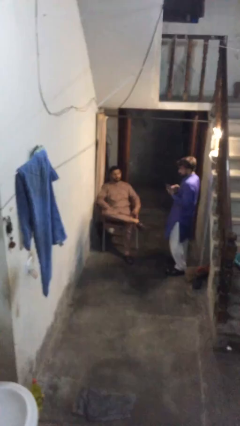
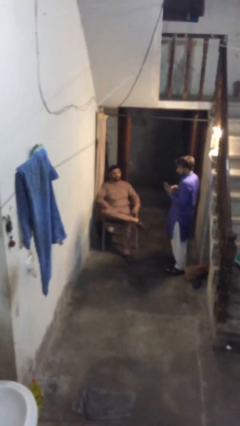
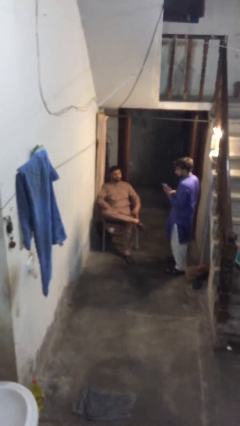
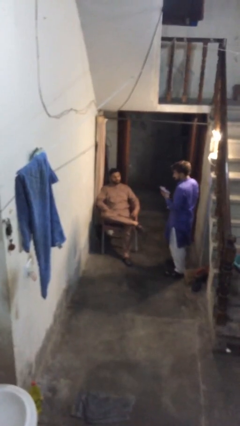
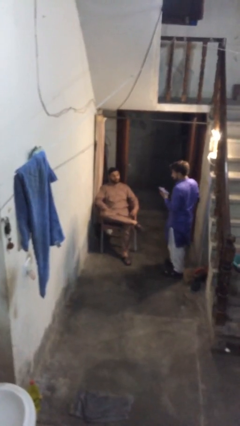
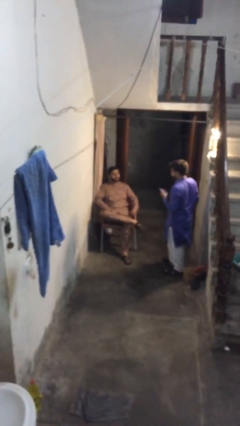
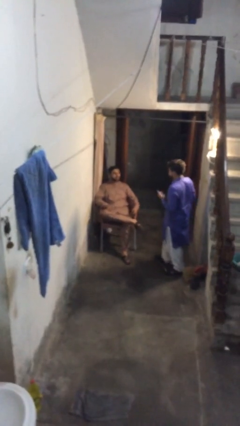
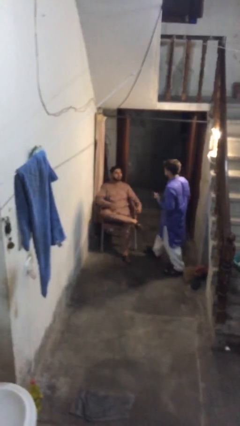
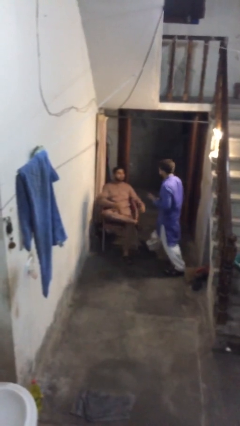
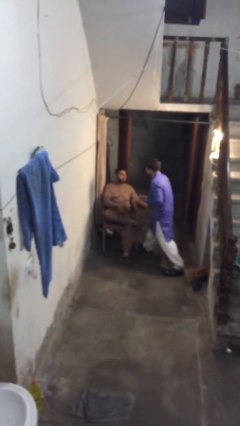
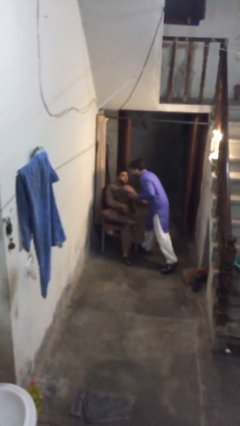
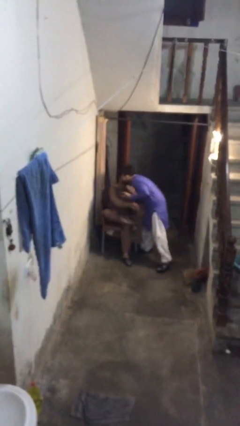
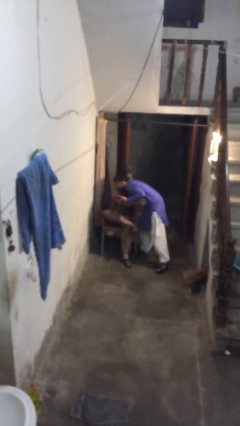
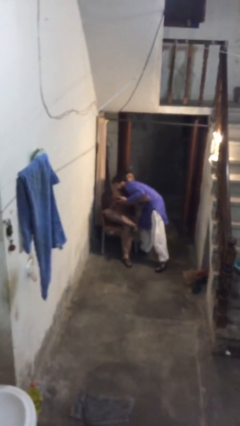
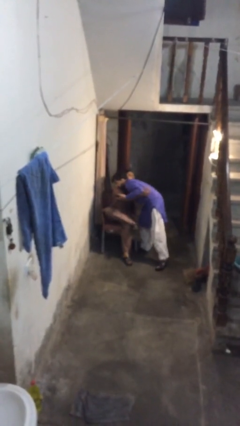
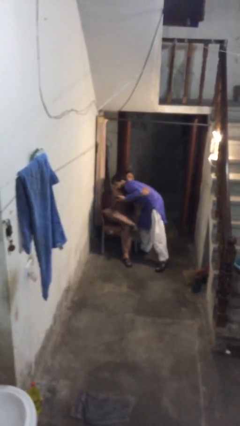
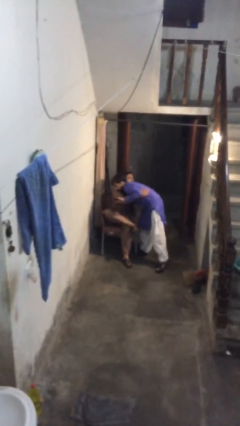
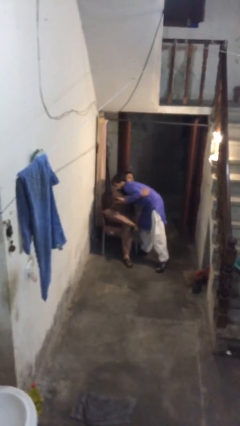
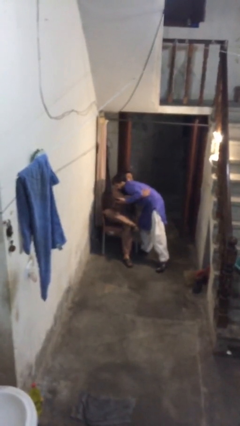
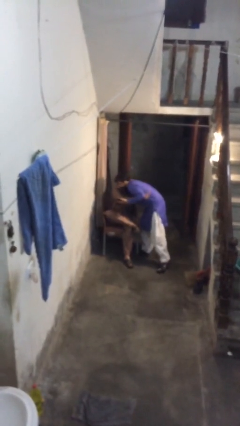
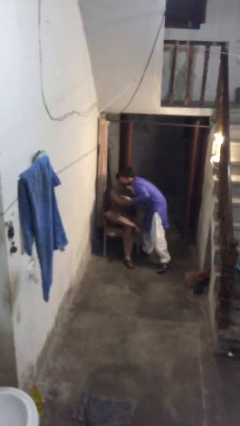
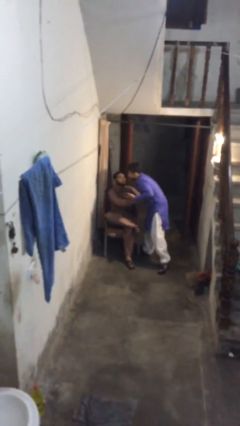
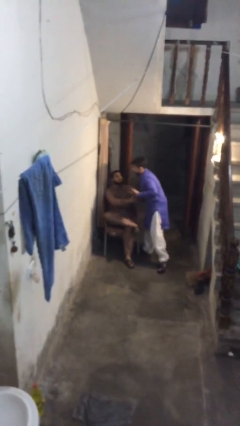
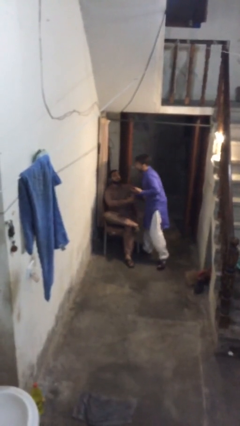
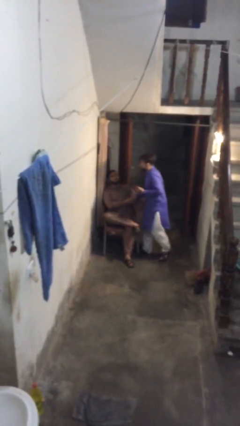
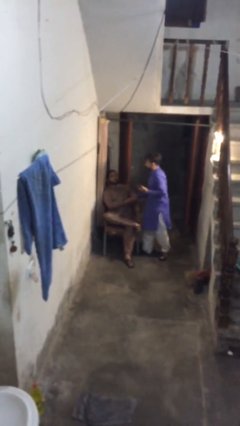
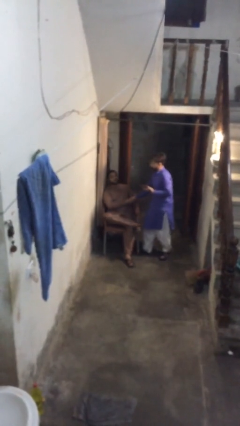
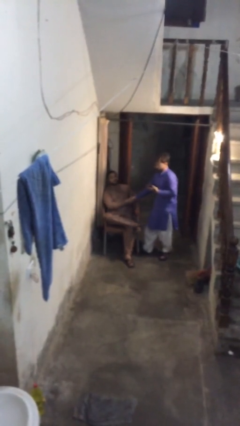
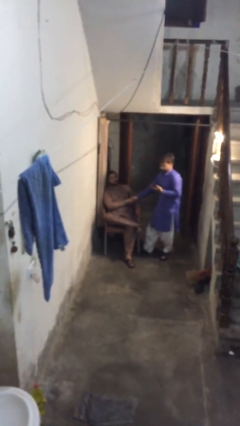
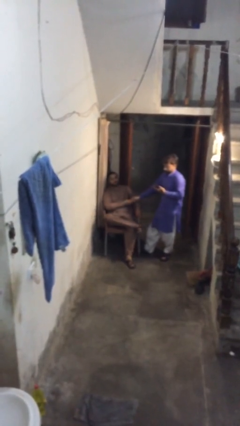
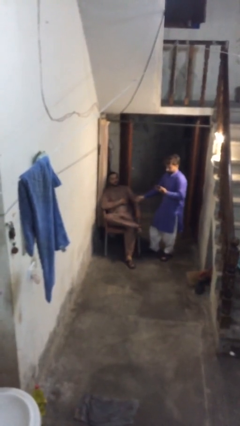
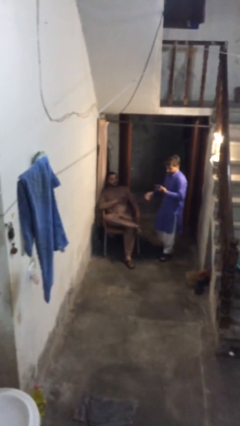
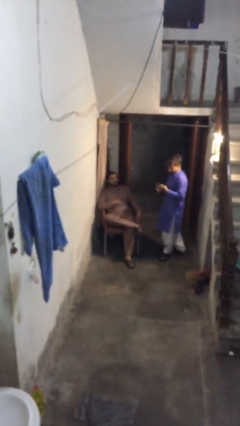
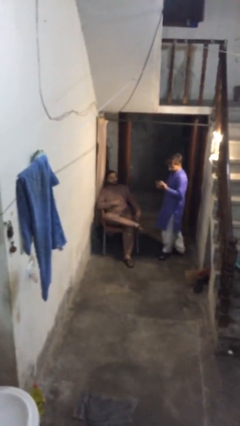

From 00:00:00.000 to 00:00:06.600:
person embraces person

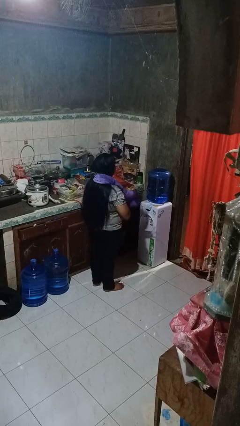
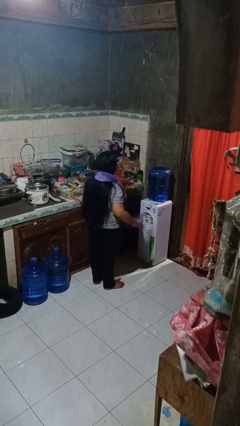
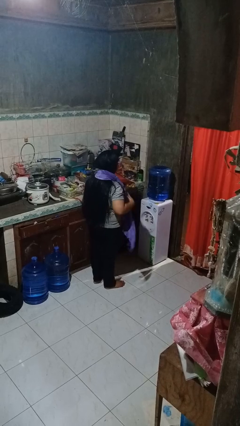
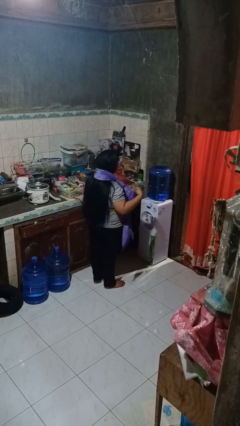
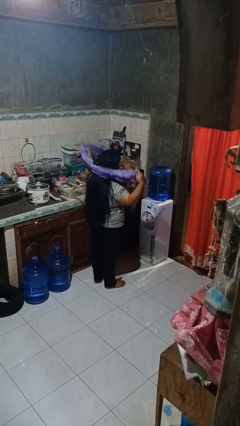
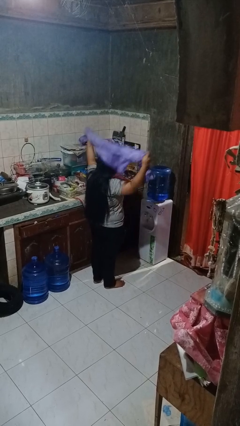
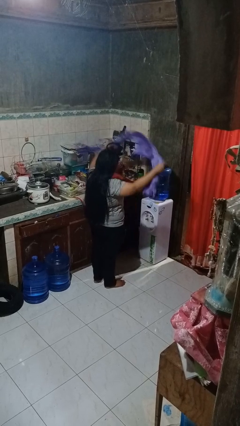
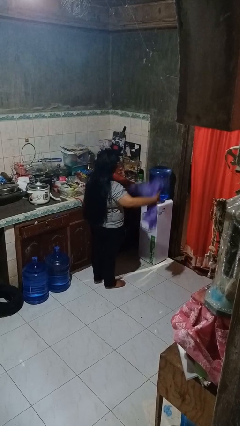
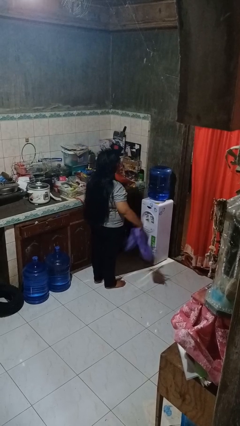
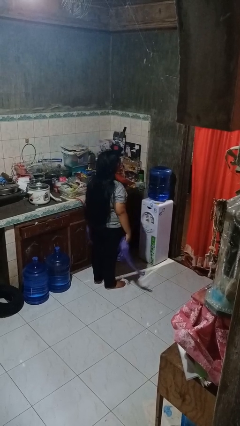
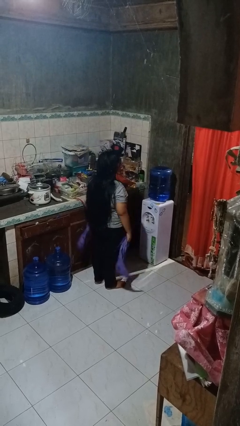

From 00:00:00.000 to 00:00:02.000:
person takes off scarf

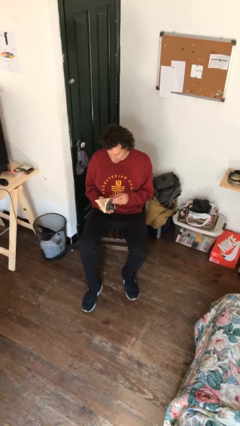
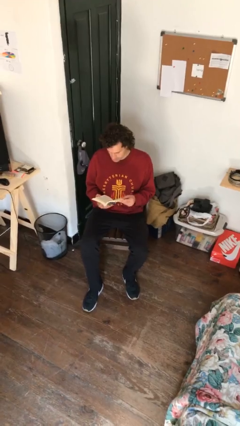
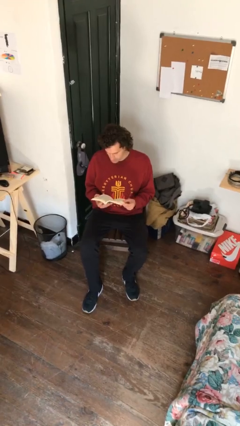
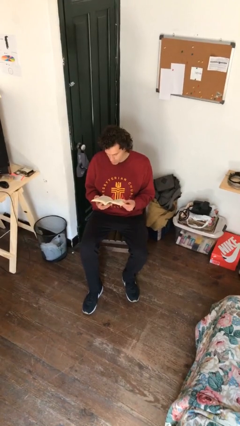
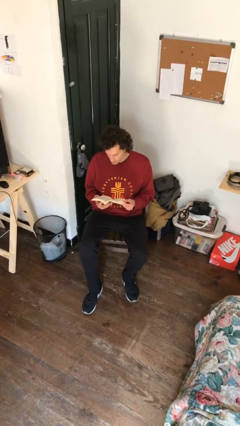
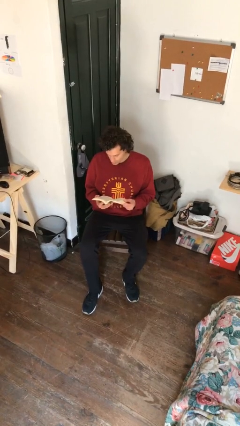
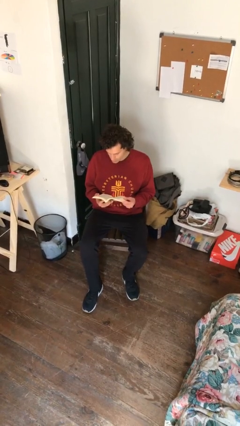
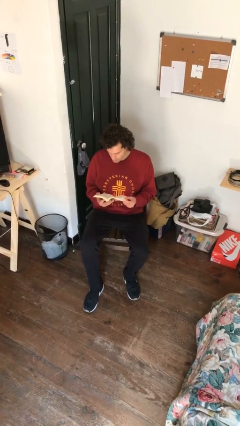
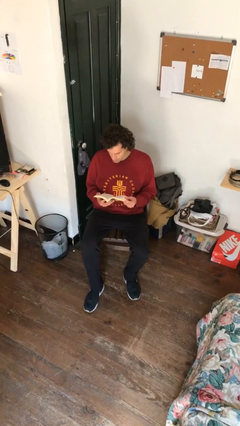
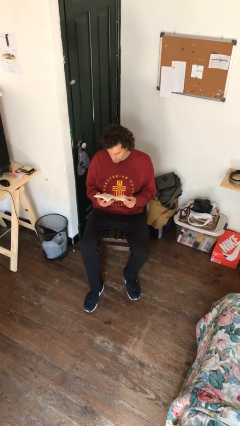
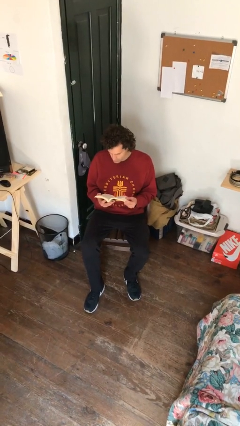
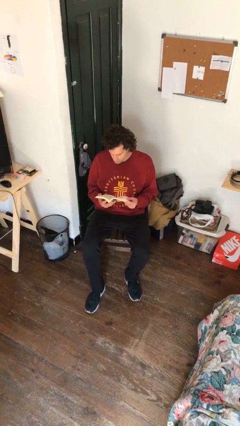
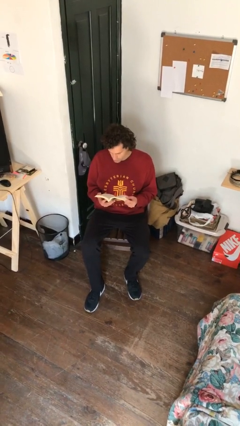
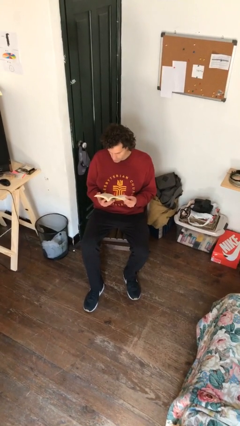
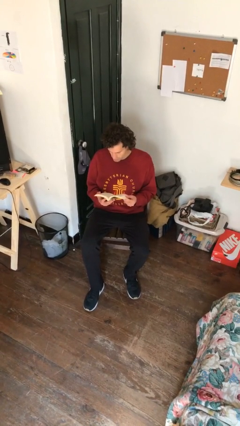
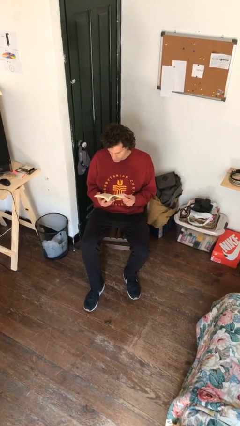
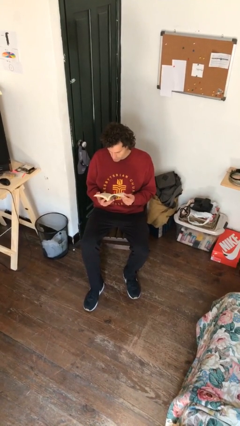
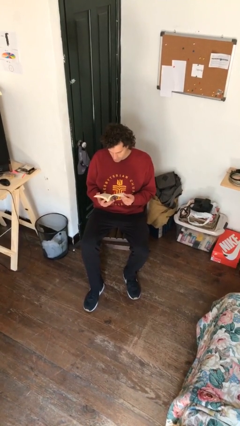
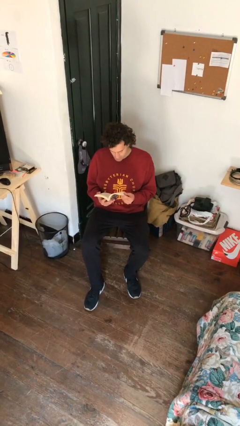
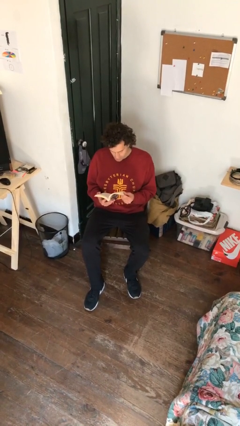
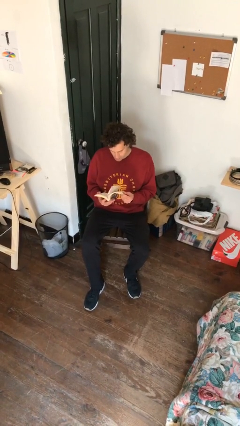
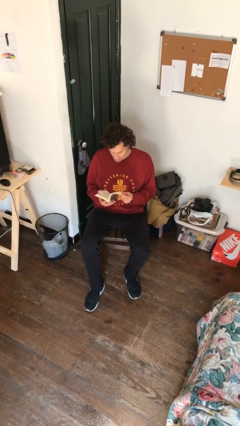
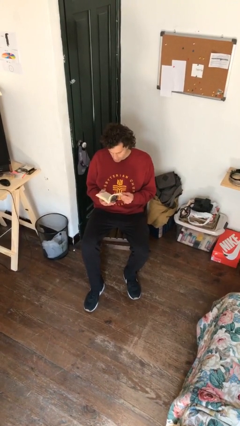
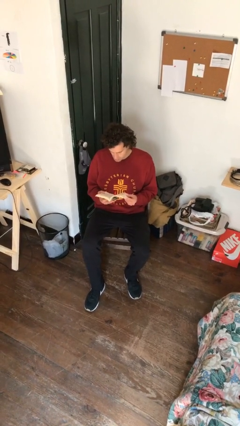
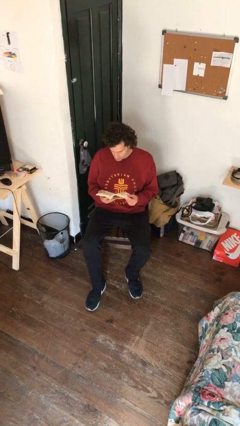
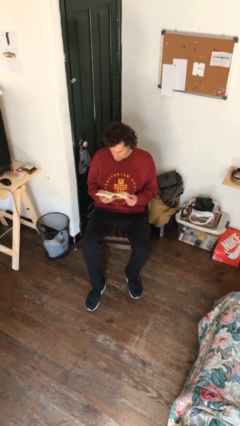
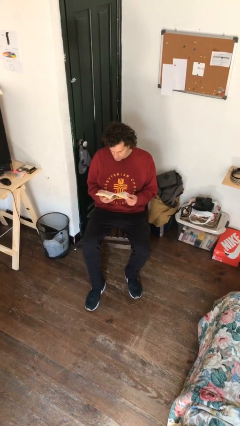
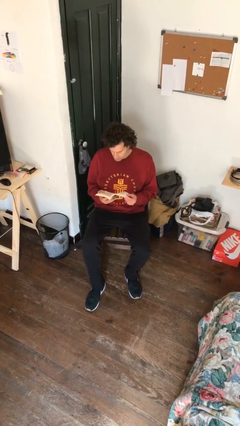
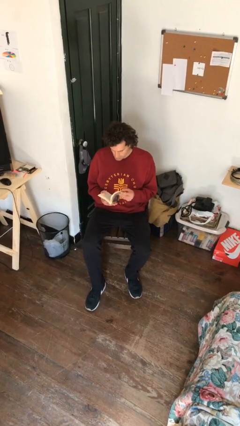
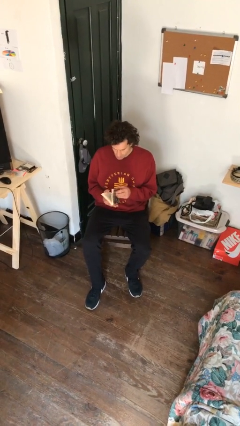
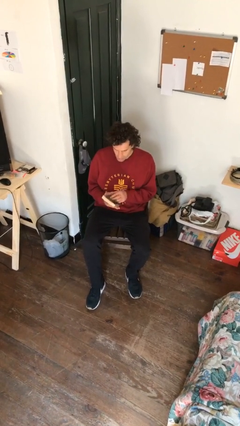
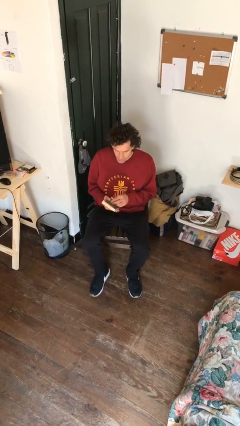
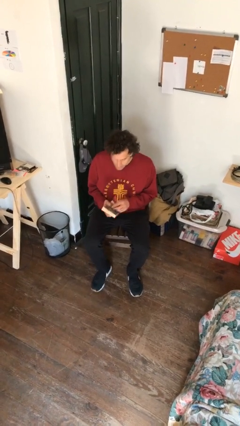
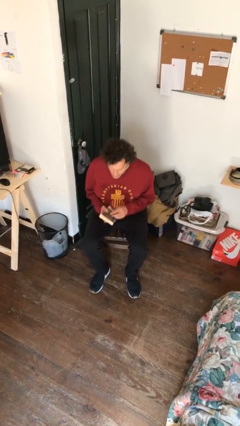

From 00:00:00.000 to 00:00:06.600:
person reads document

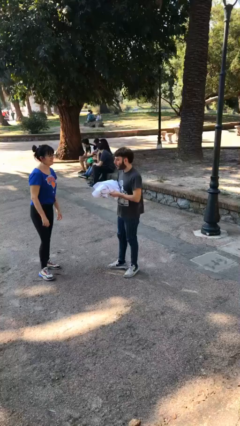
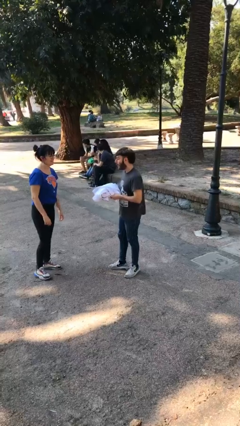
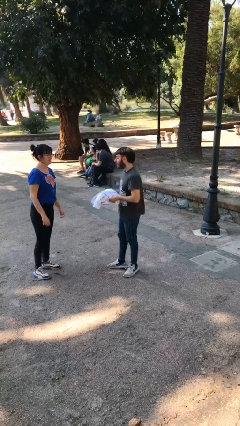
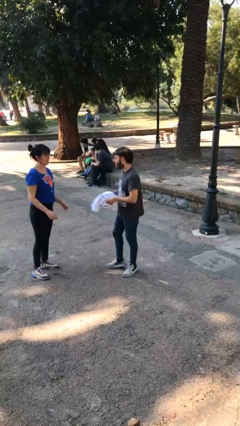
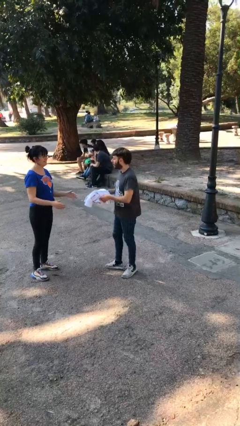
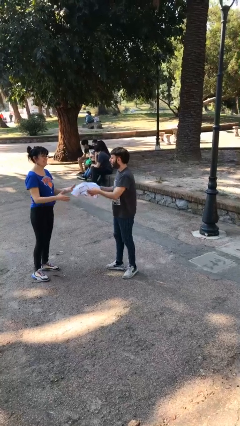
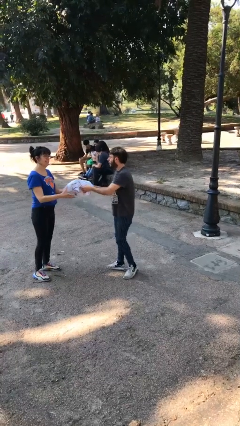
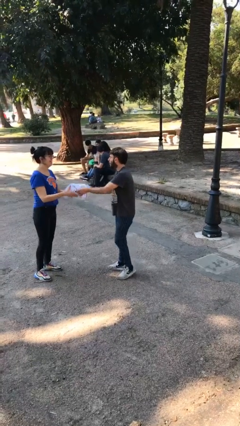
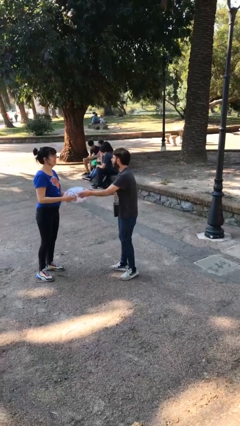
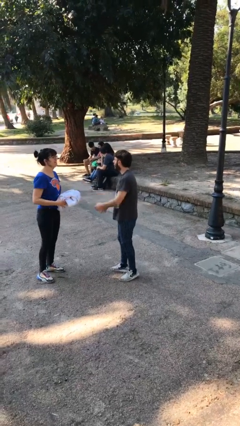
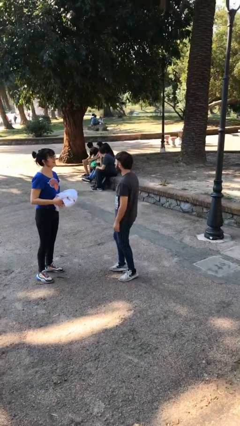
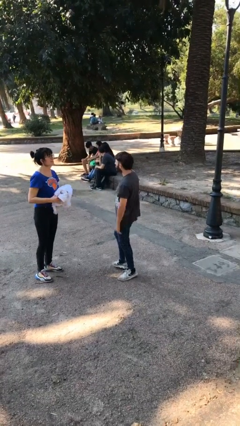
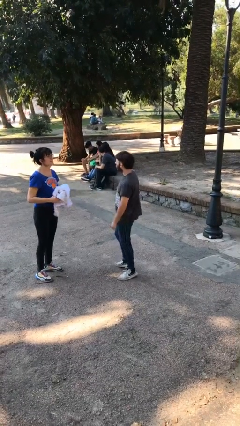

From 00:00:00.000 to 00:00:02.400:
person transfers object to person
